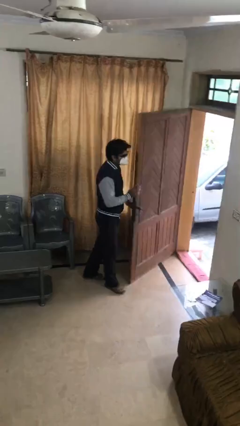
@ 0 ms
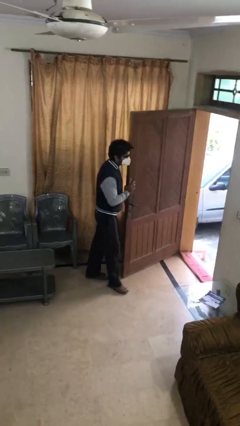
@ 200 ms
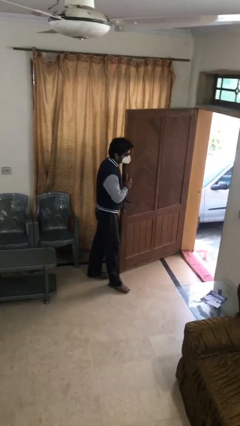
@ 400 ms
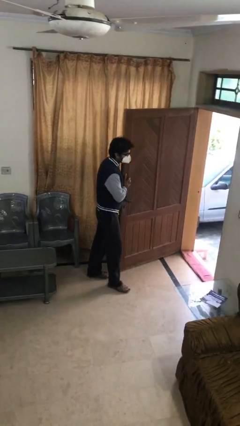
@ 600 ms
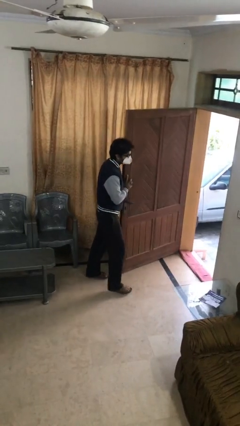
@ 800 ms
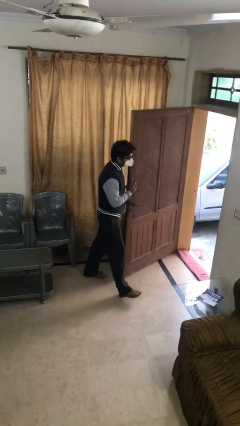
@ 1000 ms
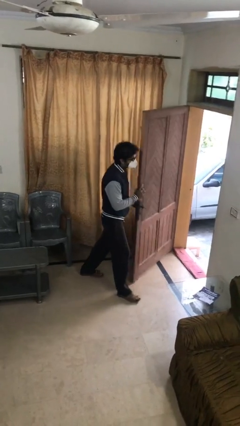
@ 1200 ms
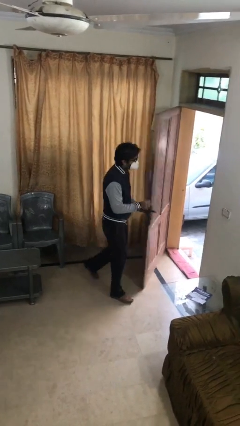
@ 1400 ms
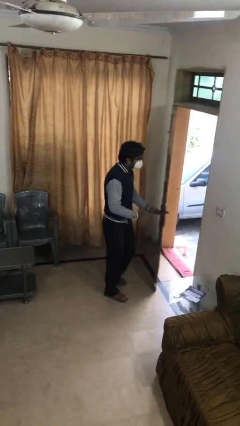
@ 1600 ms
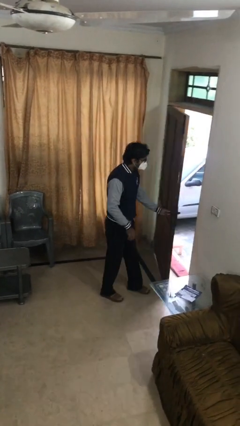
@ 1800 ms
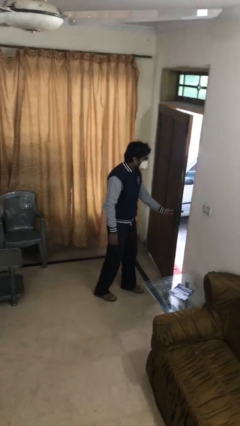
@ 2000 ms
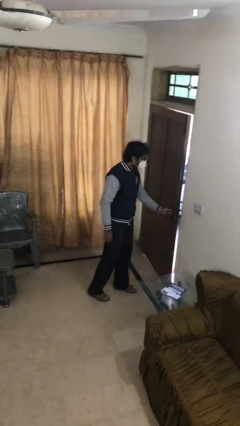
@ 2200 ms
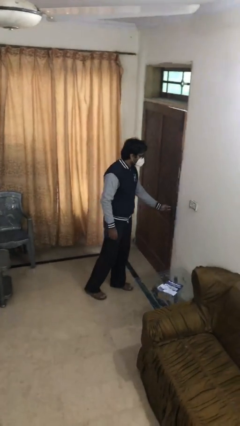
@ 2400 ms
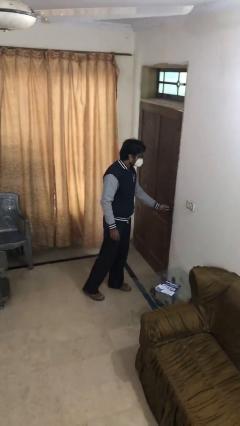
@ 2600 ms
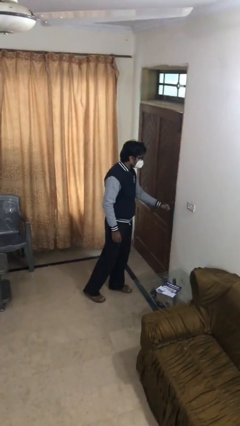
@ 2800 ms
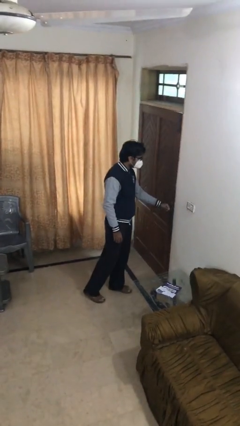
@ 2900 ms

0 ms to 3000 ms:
person closes facility door

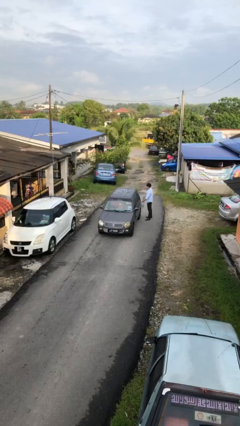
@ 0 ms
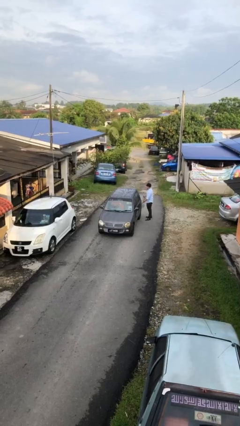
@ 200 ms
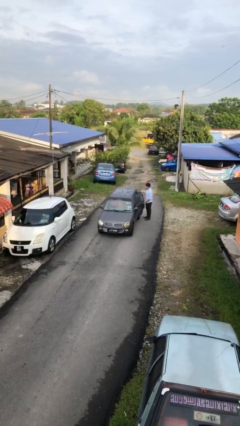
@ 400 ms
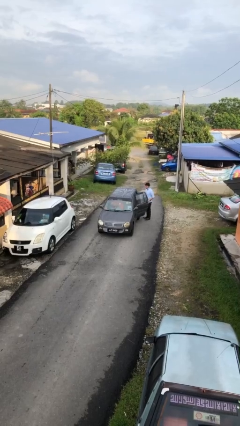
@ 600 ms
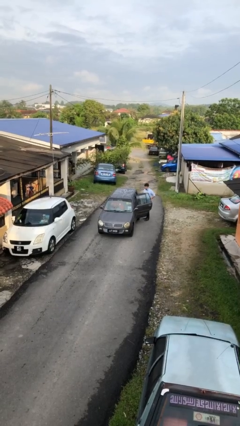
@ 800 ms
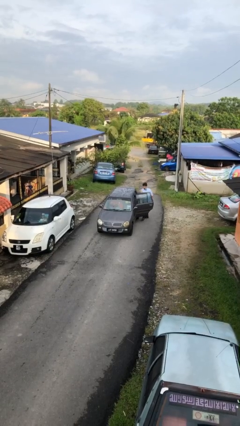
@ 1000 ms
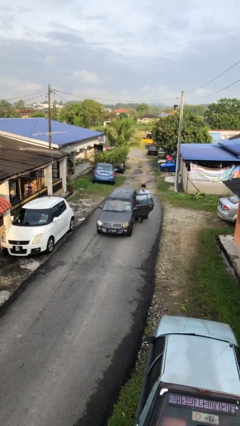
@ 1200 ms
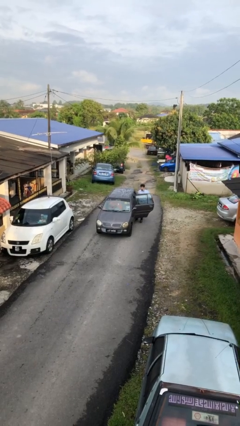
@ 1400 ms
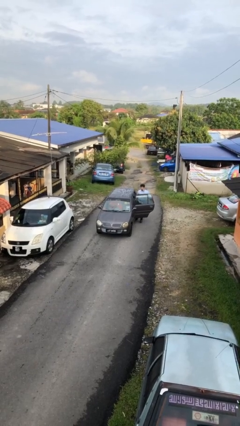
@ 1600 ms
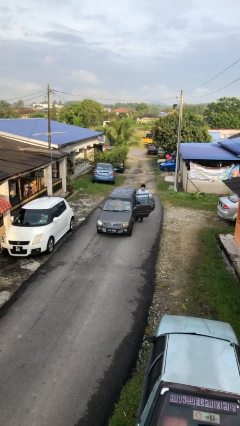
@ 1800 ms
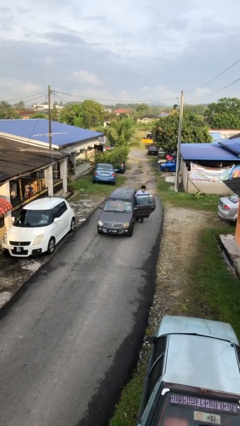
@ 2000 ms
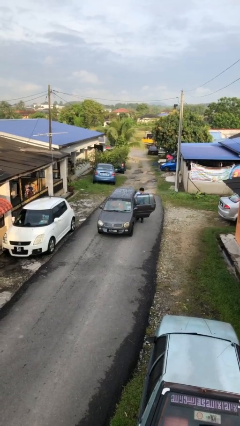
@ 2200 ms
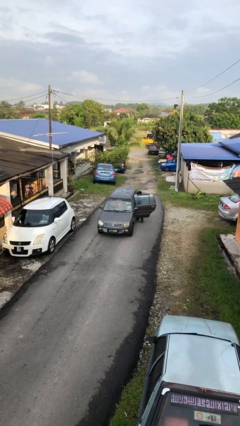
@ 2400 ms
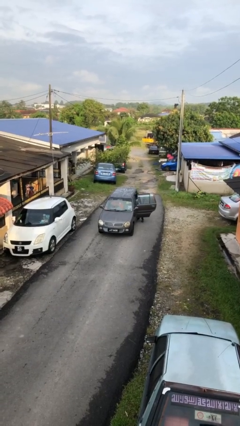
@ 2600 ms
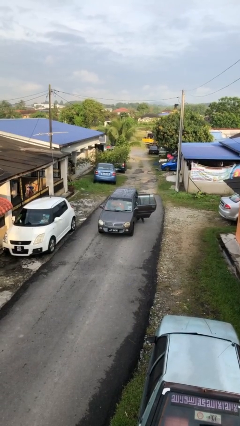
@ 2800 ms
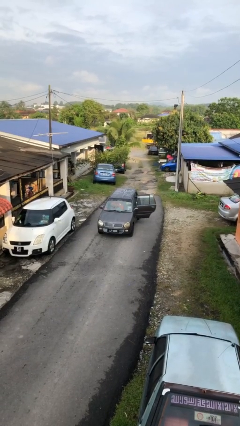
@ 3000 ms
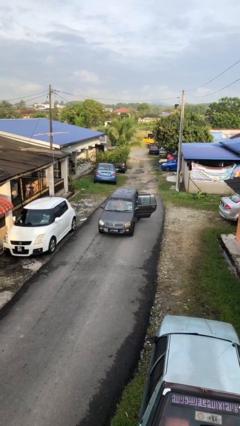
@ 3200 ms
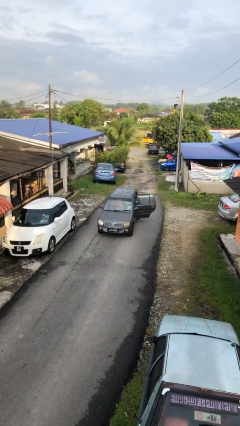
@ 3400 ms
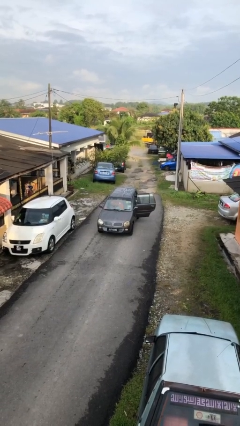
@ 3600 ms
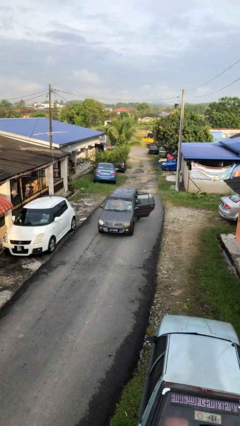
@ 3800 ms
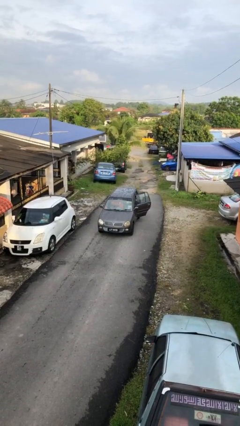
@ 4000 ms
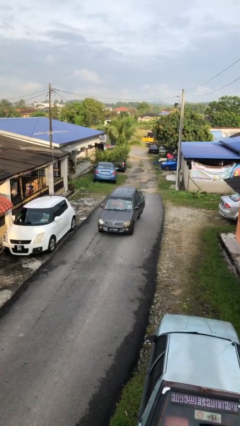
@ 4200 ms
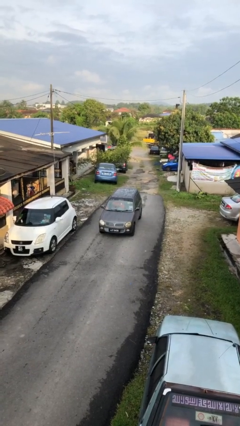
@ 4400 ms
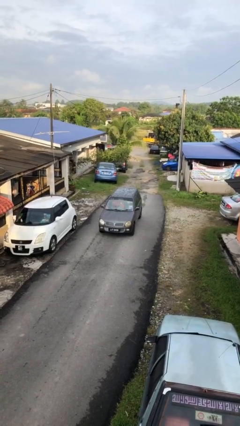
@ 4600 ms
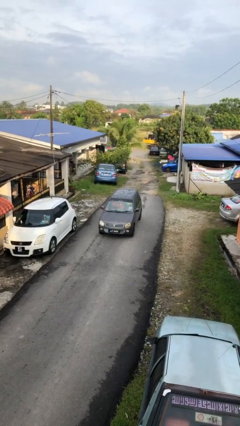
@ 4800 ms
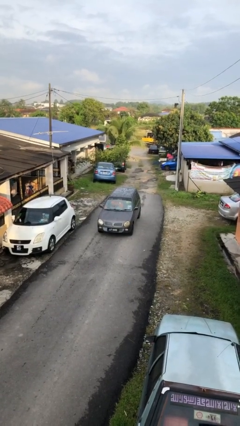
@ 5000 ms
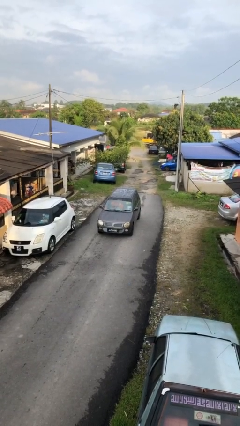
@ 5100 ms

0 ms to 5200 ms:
car picks up person

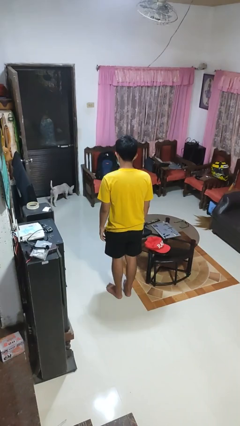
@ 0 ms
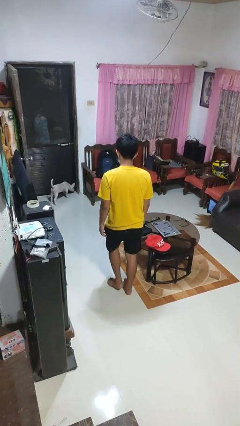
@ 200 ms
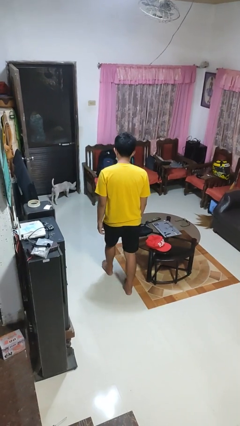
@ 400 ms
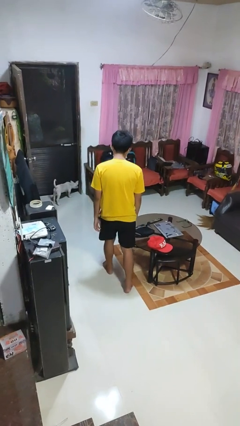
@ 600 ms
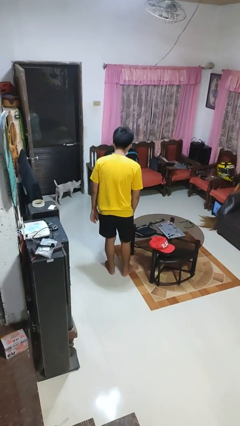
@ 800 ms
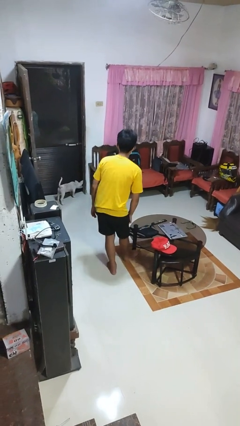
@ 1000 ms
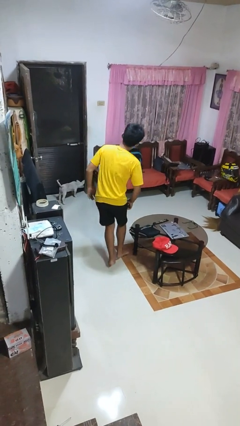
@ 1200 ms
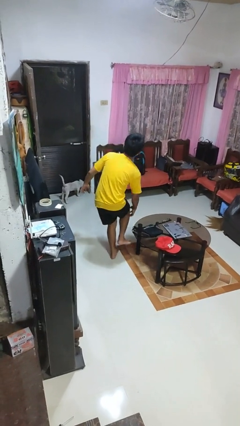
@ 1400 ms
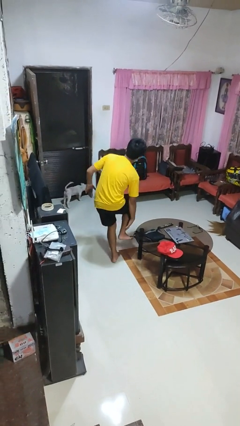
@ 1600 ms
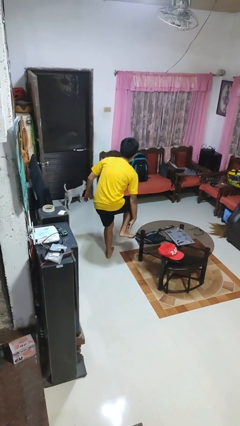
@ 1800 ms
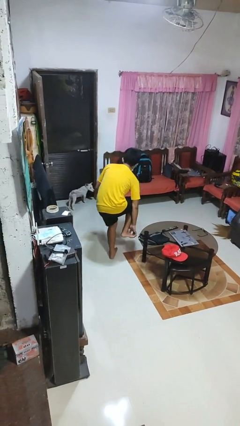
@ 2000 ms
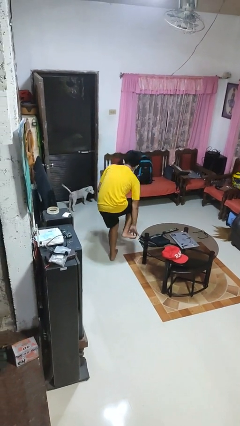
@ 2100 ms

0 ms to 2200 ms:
person trips on object on floor

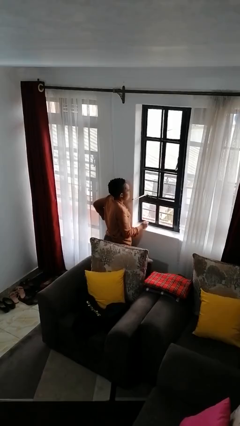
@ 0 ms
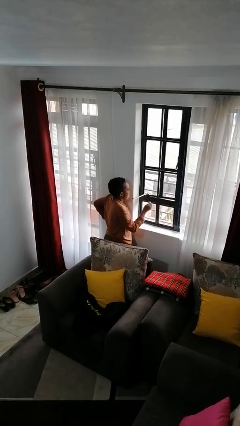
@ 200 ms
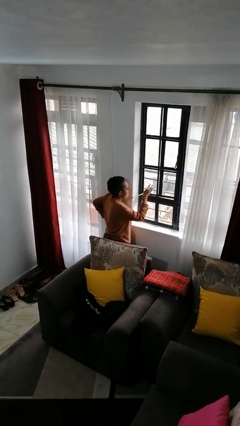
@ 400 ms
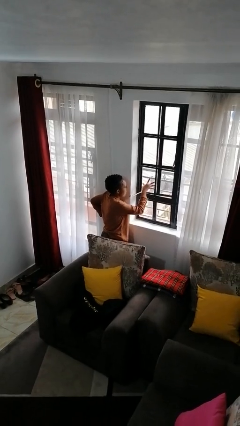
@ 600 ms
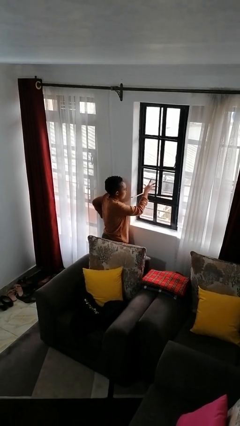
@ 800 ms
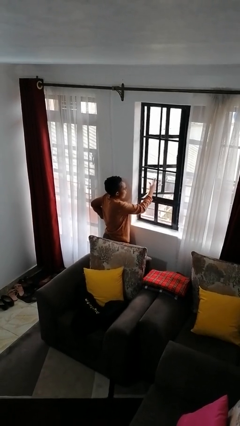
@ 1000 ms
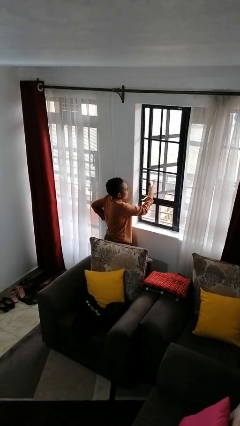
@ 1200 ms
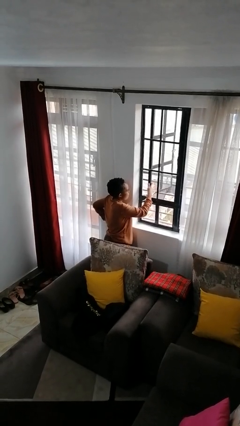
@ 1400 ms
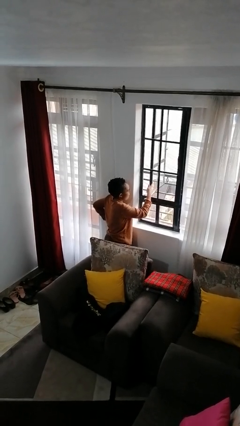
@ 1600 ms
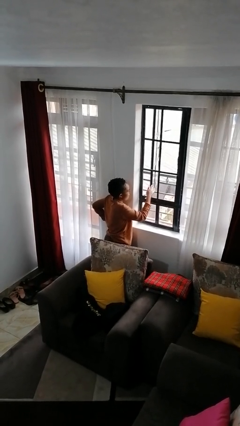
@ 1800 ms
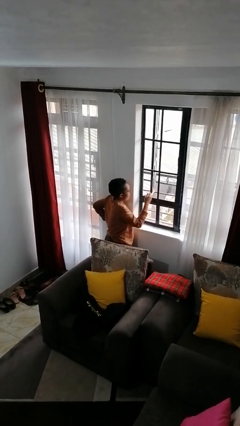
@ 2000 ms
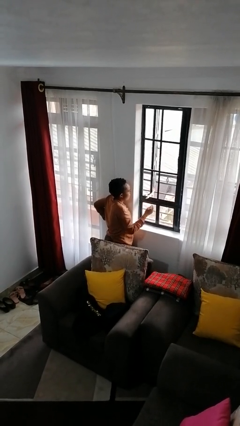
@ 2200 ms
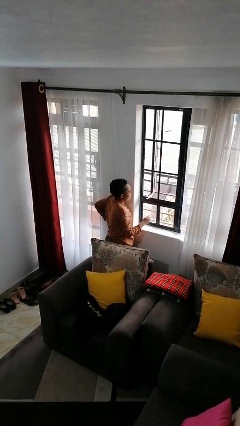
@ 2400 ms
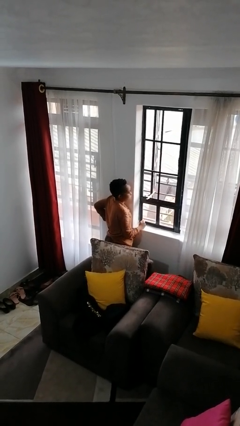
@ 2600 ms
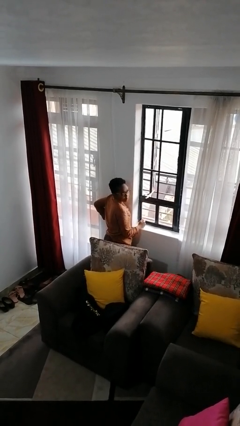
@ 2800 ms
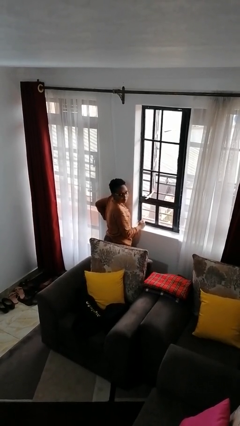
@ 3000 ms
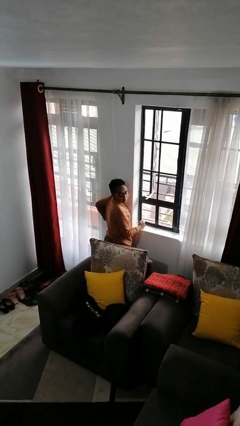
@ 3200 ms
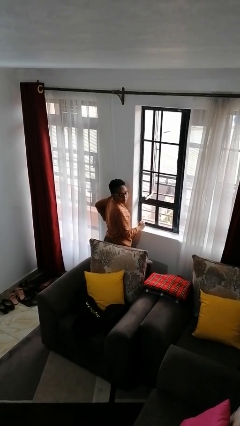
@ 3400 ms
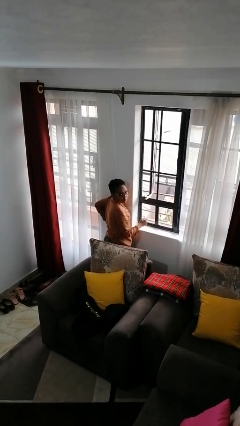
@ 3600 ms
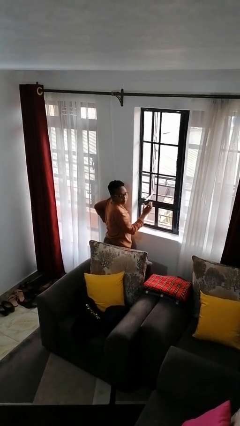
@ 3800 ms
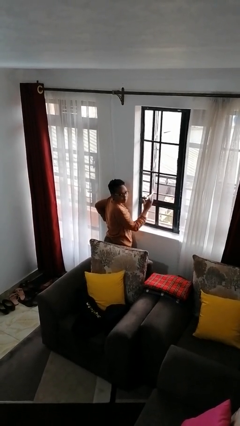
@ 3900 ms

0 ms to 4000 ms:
person opens home window

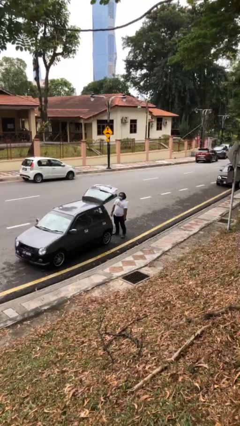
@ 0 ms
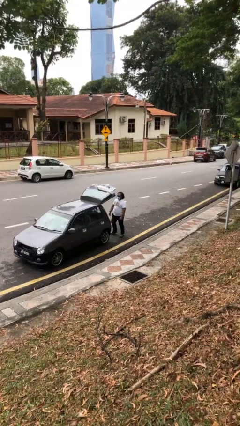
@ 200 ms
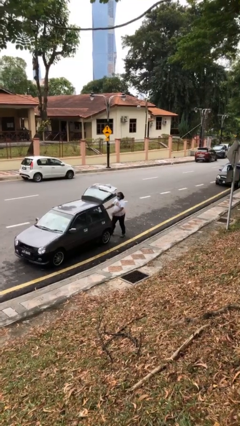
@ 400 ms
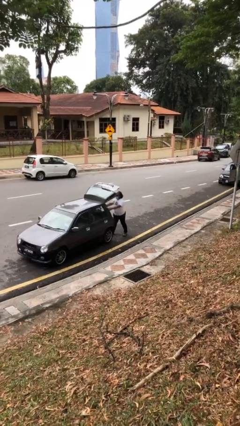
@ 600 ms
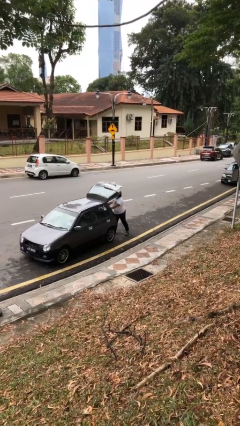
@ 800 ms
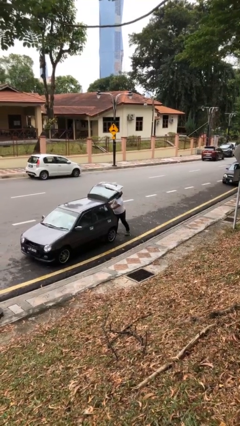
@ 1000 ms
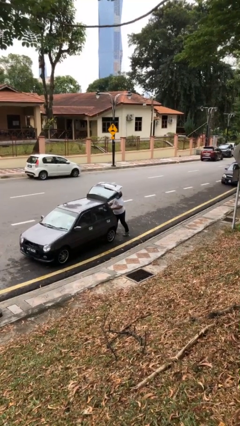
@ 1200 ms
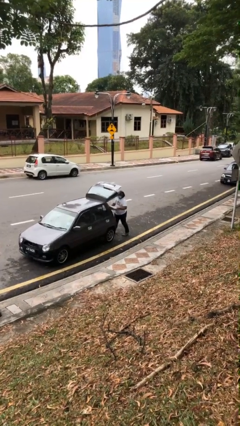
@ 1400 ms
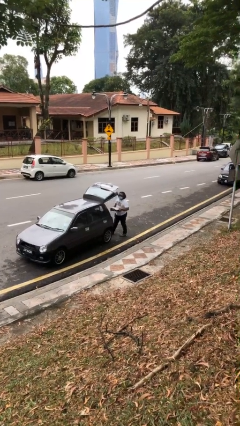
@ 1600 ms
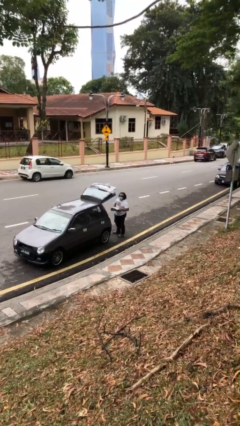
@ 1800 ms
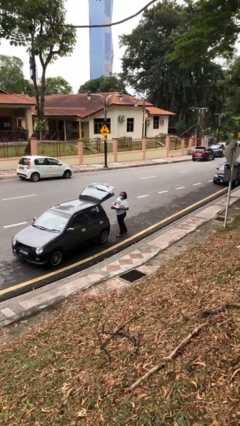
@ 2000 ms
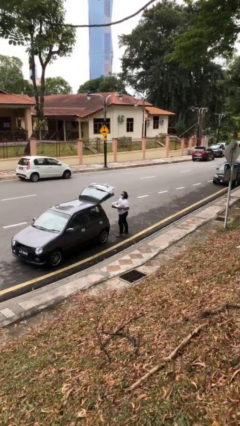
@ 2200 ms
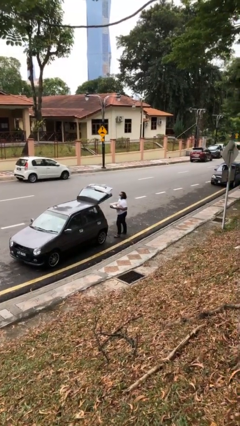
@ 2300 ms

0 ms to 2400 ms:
person unloads car

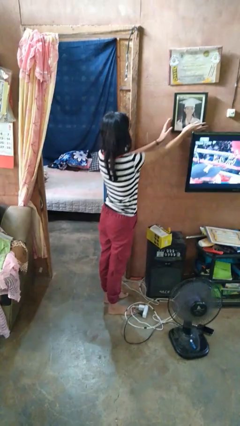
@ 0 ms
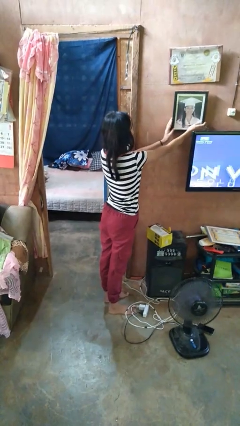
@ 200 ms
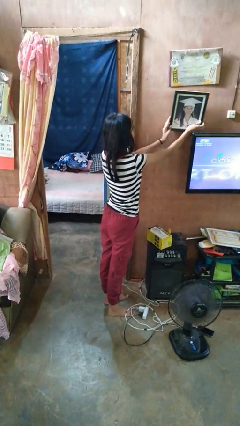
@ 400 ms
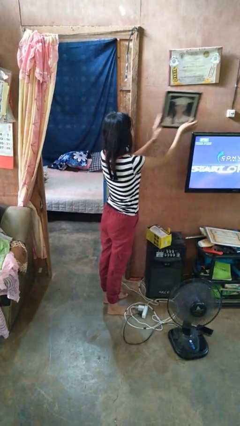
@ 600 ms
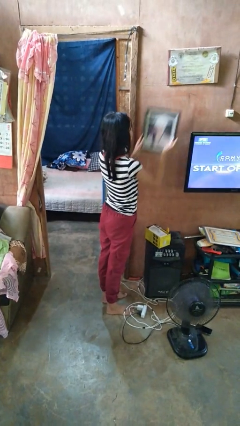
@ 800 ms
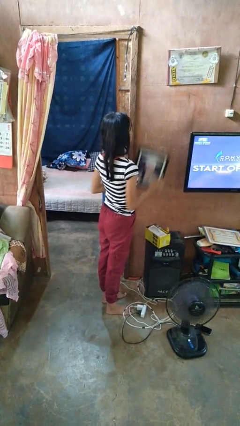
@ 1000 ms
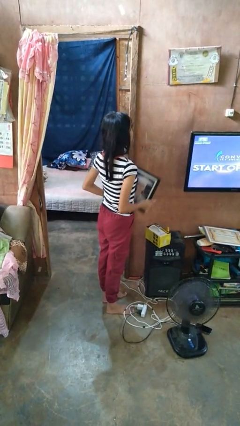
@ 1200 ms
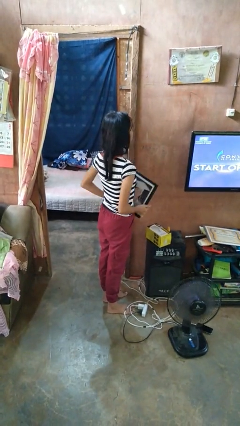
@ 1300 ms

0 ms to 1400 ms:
person takes down picture frame
